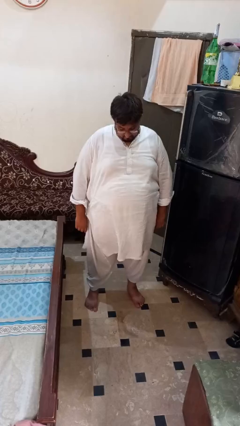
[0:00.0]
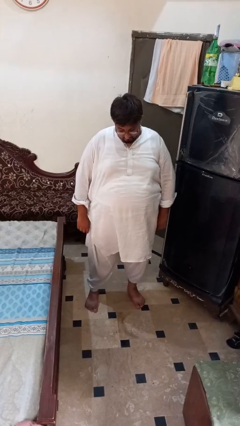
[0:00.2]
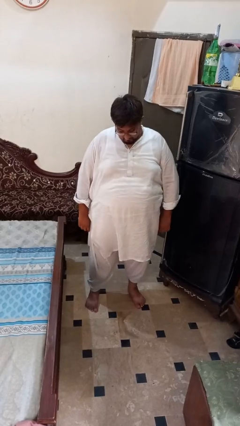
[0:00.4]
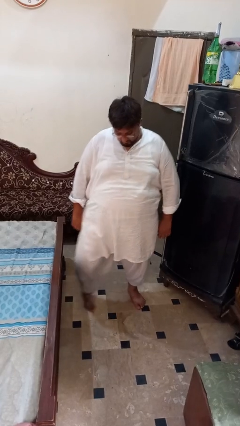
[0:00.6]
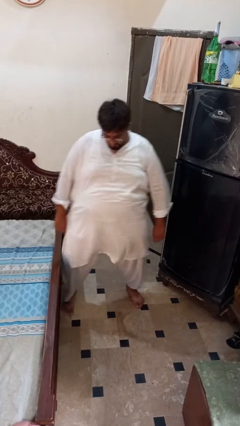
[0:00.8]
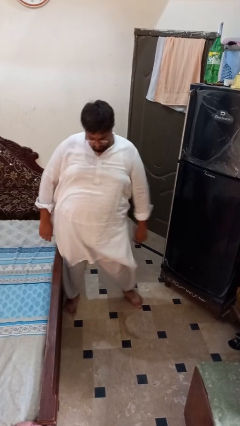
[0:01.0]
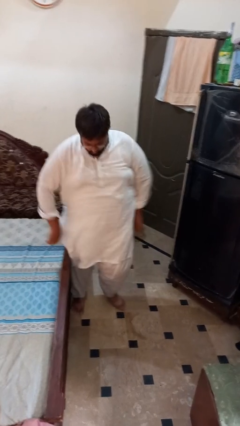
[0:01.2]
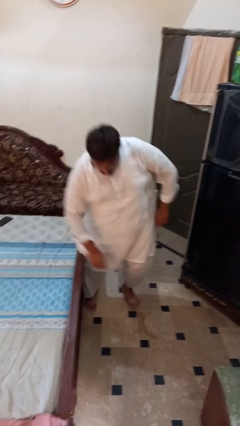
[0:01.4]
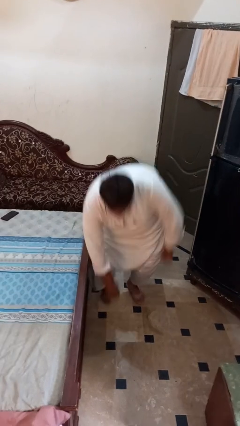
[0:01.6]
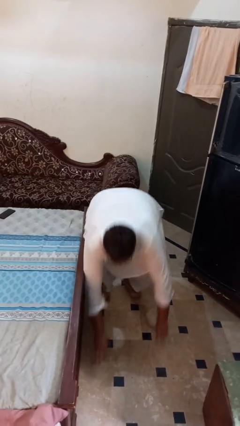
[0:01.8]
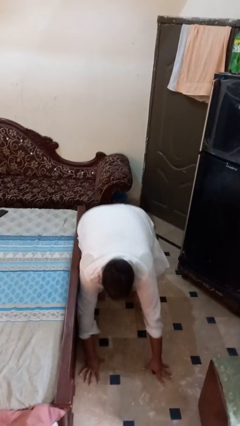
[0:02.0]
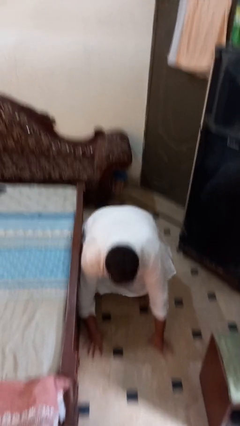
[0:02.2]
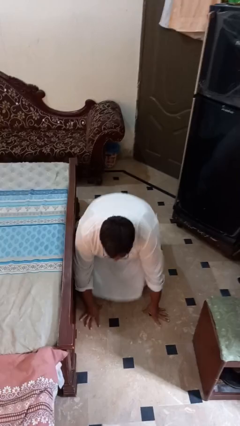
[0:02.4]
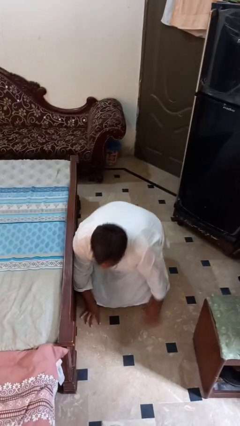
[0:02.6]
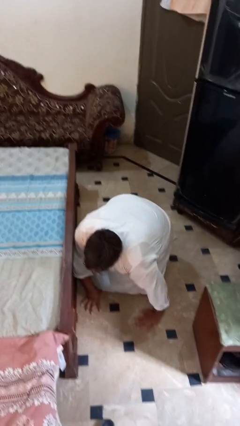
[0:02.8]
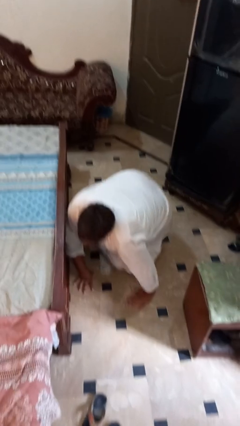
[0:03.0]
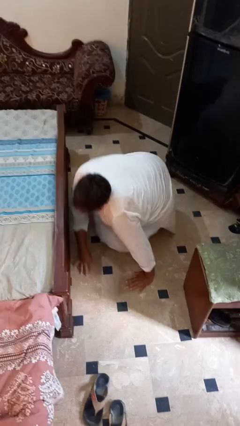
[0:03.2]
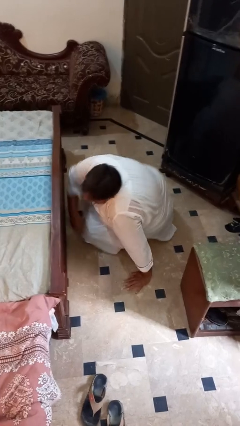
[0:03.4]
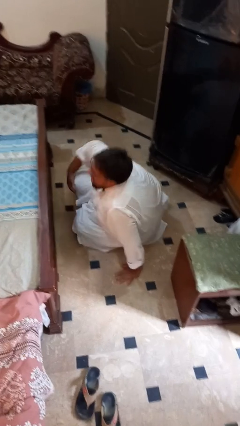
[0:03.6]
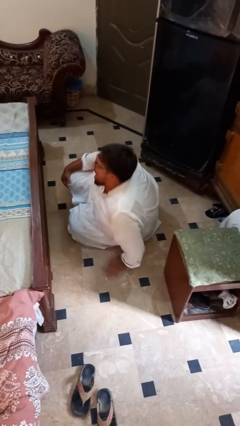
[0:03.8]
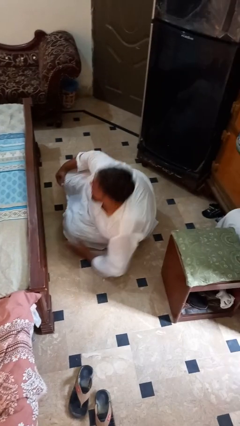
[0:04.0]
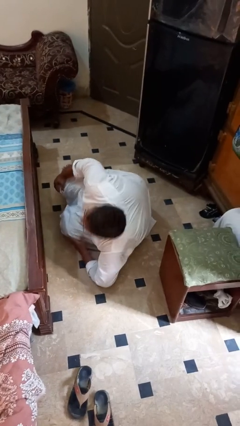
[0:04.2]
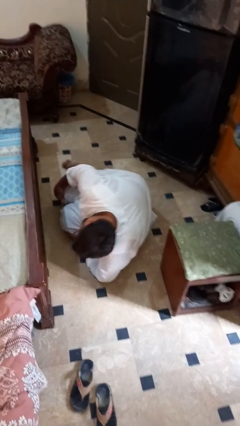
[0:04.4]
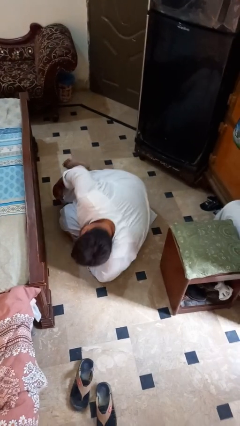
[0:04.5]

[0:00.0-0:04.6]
person trips on object on floor

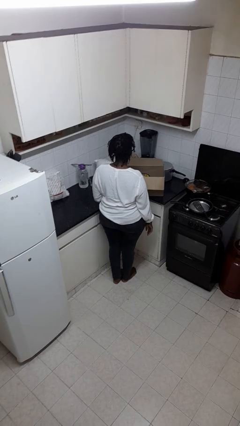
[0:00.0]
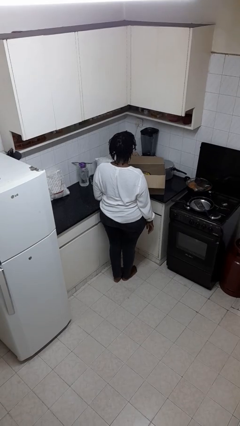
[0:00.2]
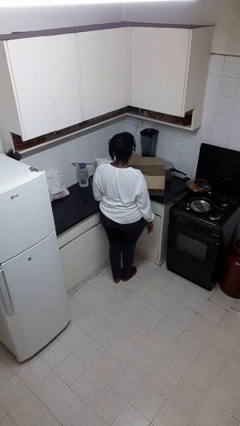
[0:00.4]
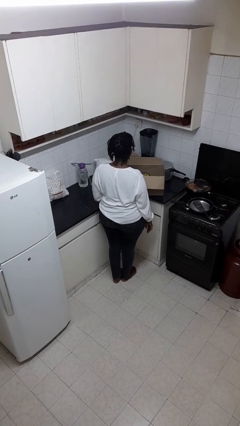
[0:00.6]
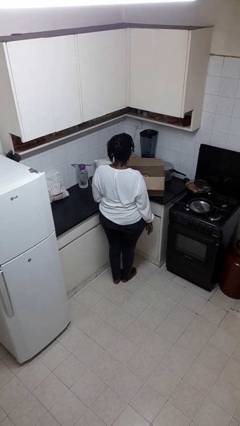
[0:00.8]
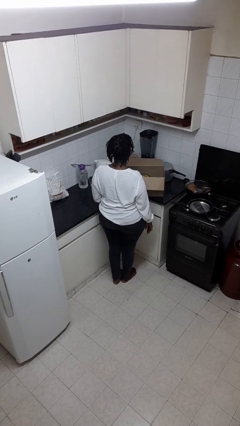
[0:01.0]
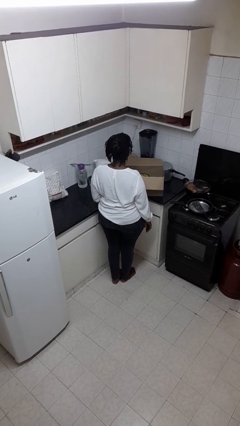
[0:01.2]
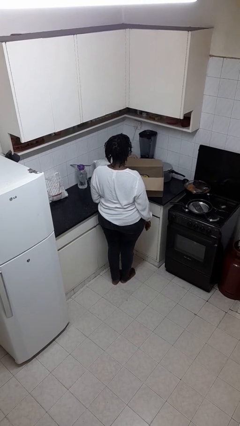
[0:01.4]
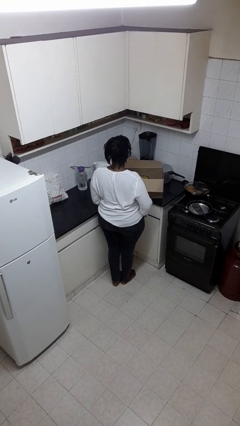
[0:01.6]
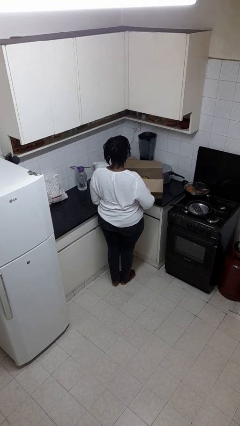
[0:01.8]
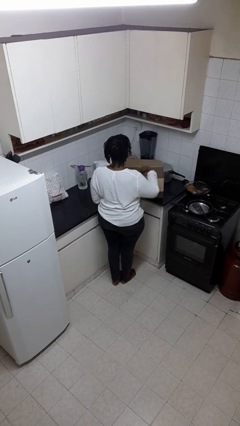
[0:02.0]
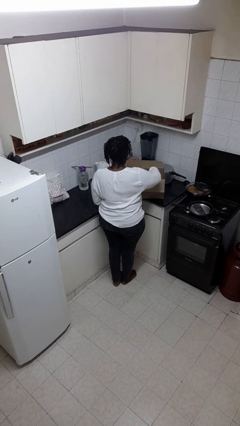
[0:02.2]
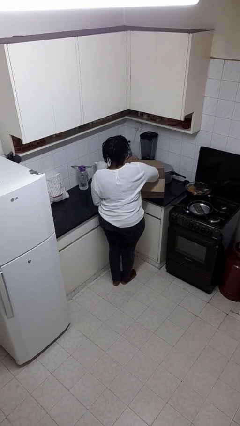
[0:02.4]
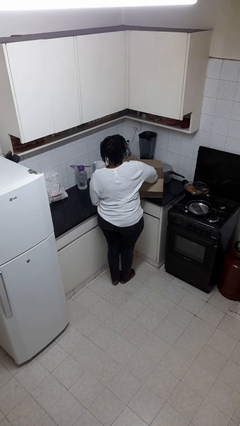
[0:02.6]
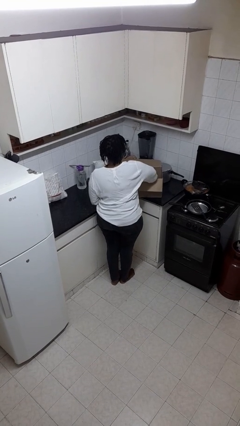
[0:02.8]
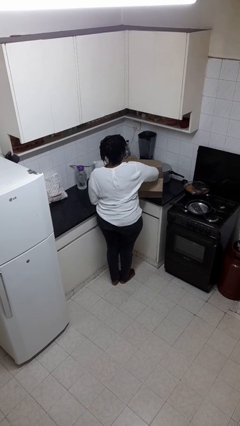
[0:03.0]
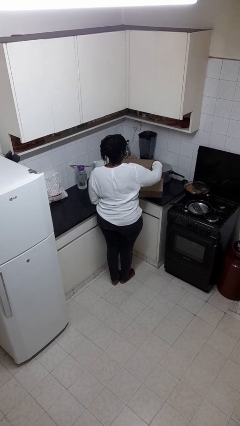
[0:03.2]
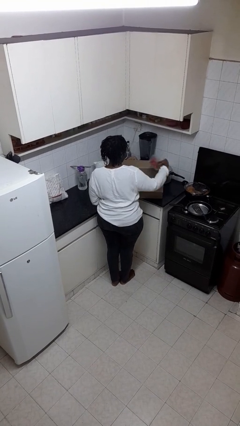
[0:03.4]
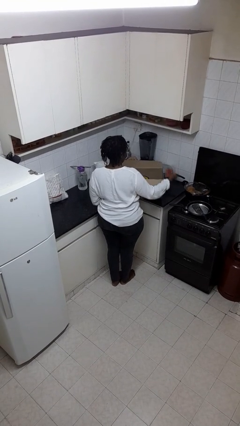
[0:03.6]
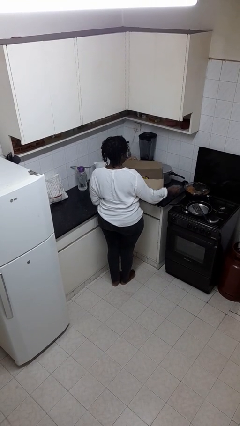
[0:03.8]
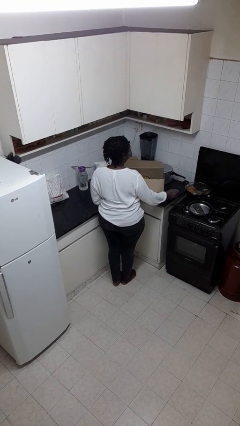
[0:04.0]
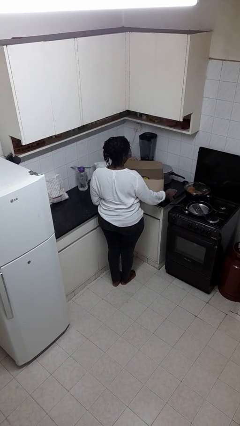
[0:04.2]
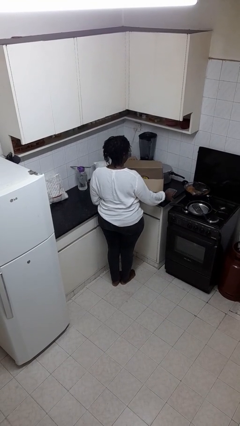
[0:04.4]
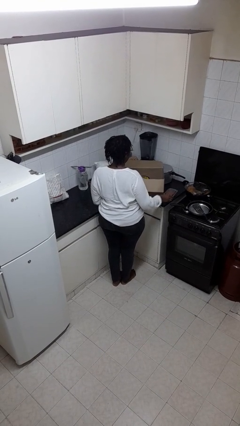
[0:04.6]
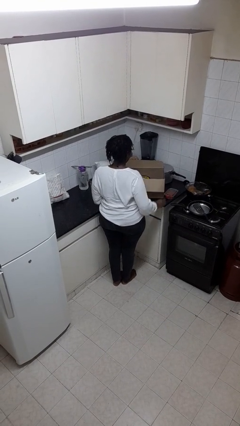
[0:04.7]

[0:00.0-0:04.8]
person takes object from box

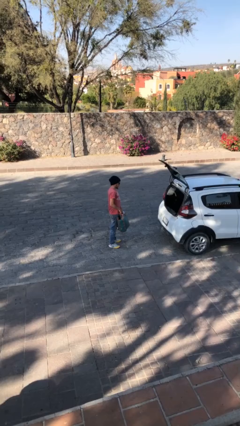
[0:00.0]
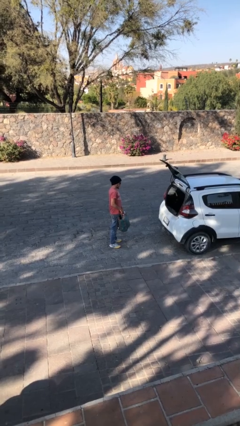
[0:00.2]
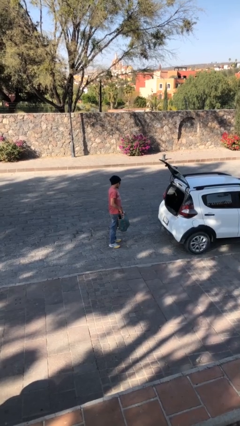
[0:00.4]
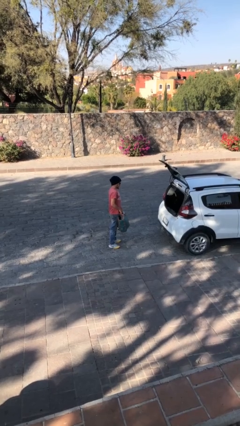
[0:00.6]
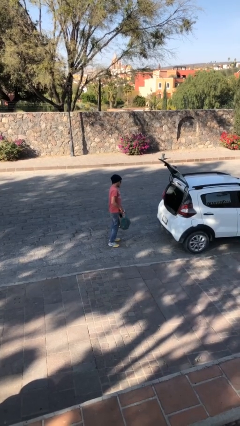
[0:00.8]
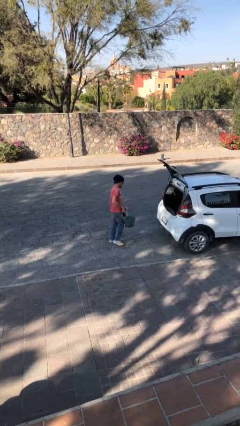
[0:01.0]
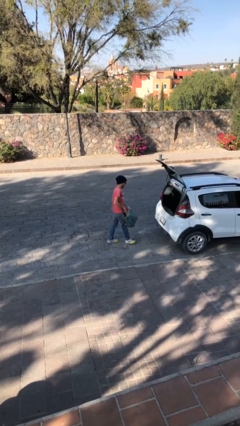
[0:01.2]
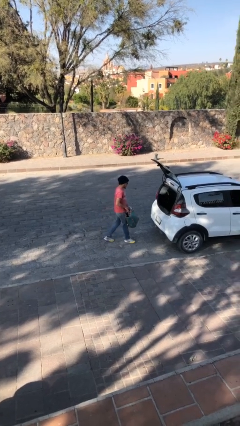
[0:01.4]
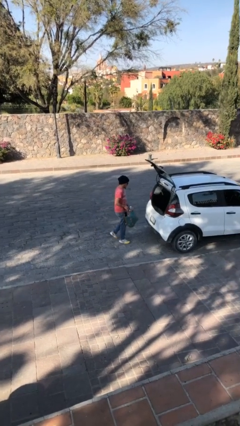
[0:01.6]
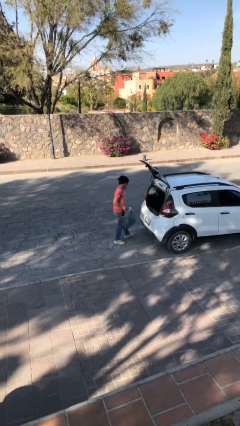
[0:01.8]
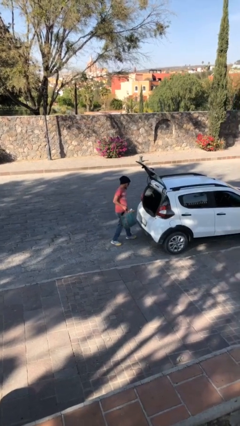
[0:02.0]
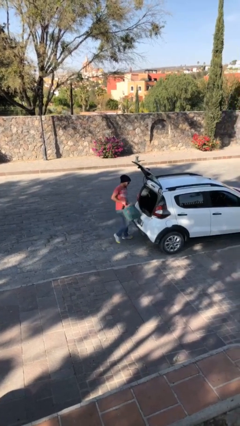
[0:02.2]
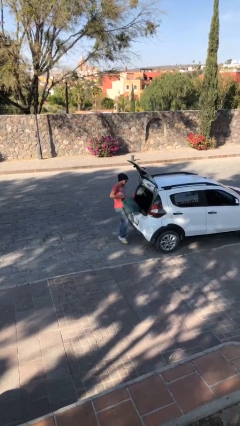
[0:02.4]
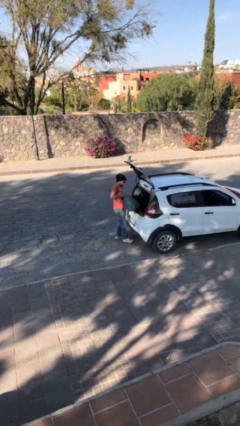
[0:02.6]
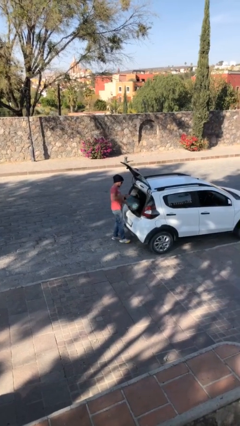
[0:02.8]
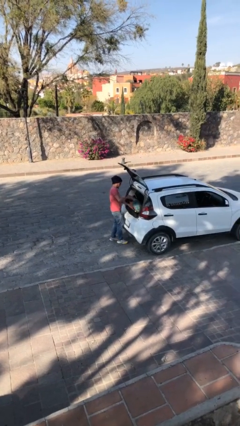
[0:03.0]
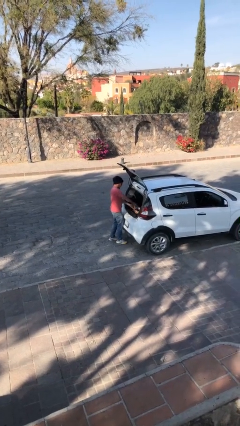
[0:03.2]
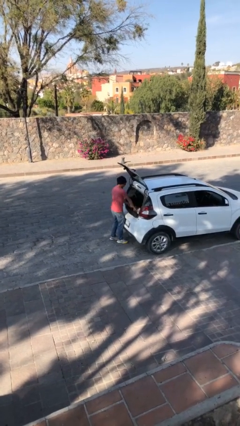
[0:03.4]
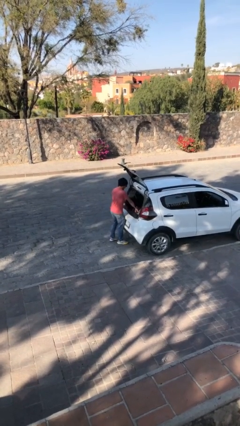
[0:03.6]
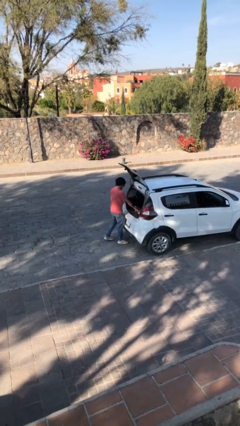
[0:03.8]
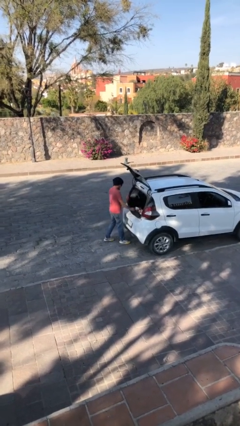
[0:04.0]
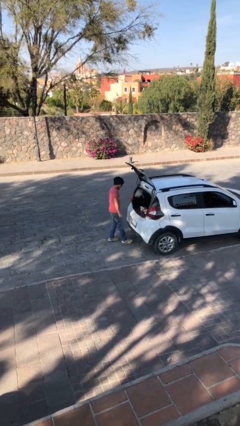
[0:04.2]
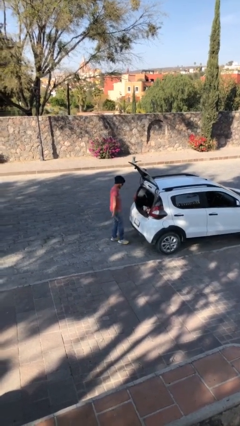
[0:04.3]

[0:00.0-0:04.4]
person loads car

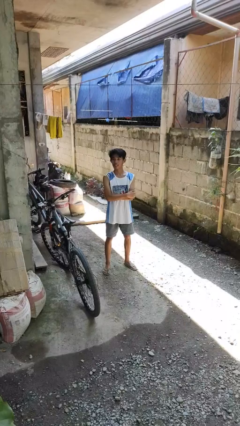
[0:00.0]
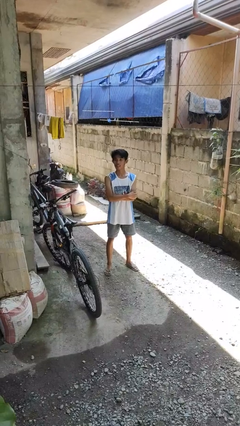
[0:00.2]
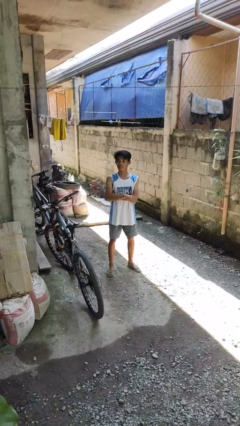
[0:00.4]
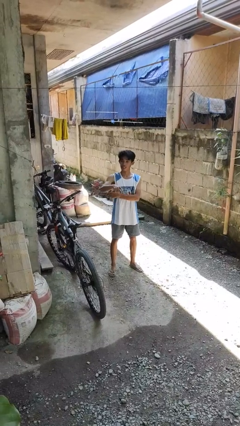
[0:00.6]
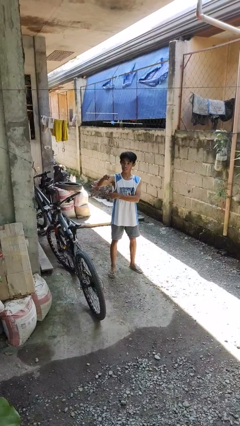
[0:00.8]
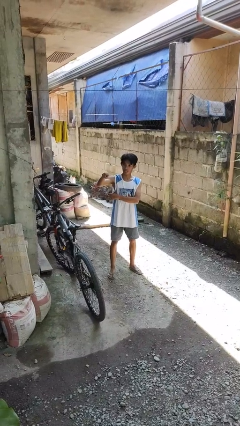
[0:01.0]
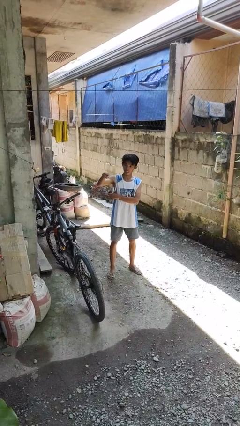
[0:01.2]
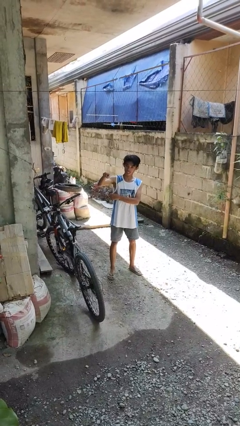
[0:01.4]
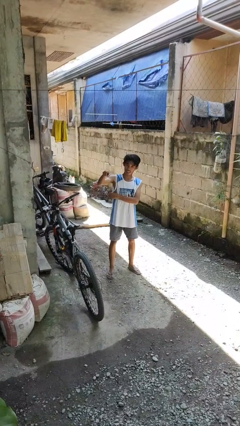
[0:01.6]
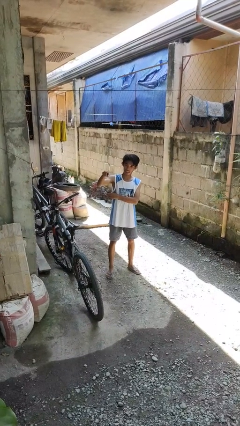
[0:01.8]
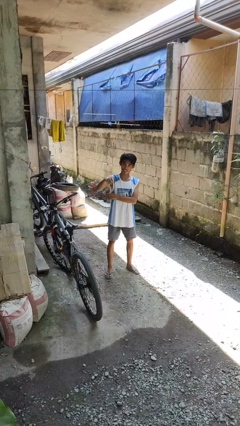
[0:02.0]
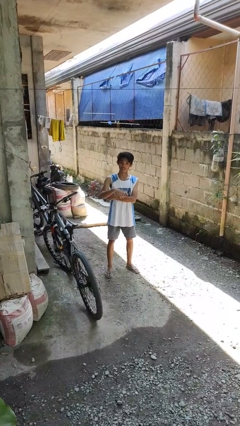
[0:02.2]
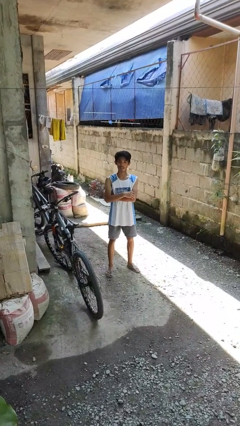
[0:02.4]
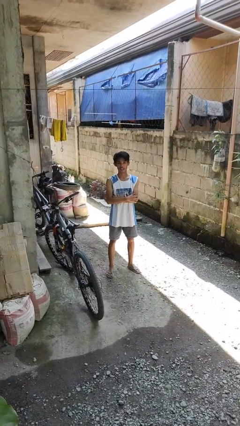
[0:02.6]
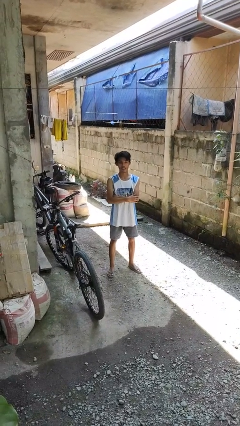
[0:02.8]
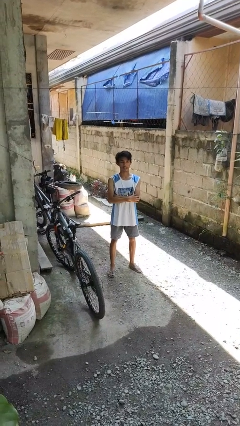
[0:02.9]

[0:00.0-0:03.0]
person points at person

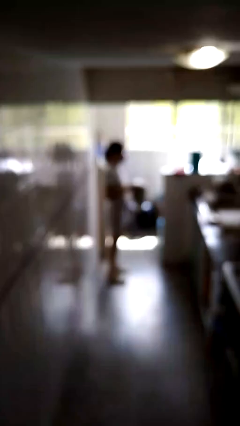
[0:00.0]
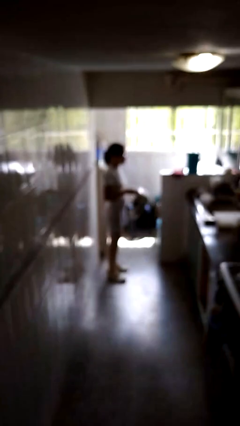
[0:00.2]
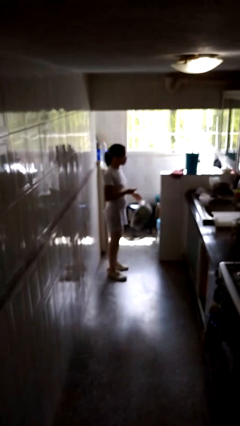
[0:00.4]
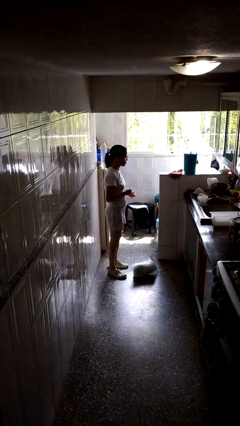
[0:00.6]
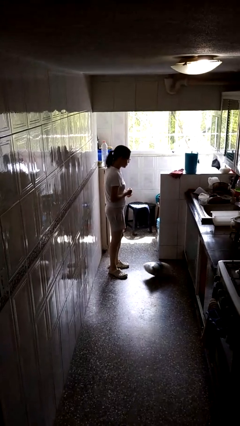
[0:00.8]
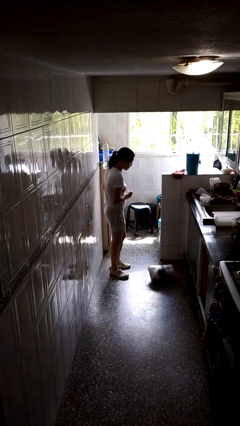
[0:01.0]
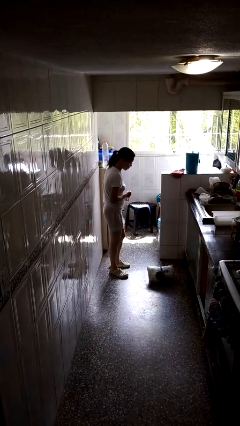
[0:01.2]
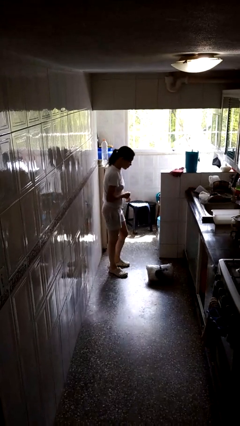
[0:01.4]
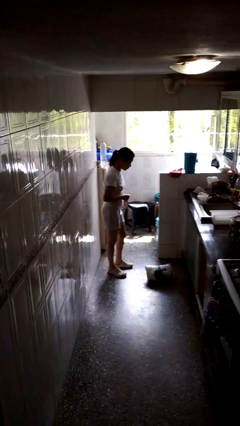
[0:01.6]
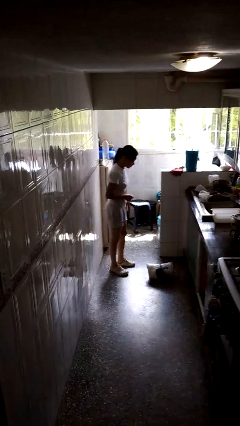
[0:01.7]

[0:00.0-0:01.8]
person drops object
